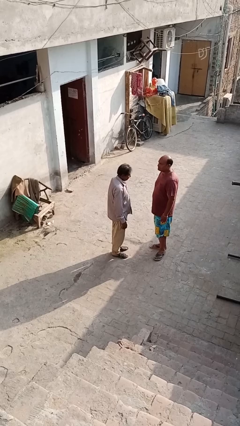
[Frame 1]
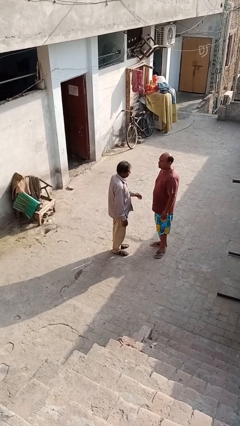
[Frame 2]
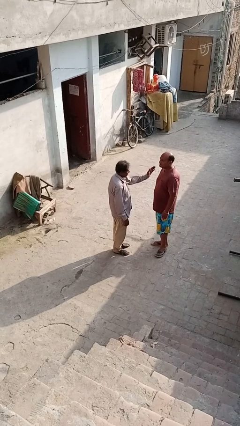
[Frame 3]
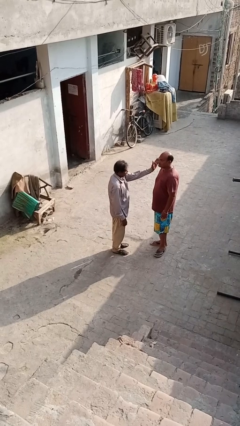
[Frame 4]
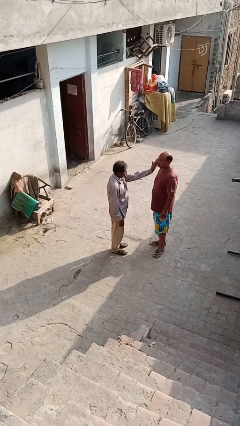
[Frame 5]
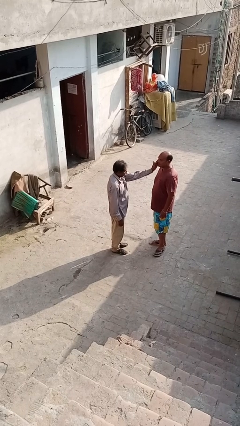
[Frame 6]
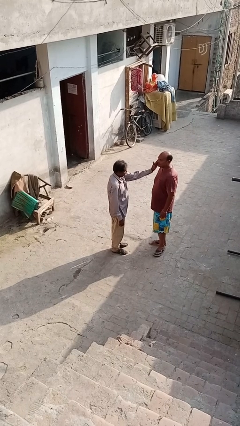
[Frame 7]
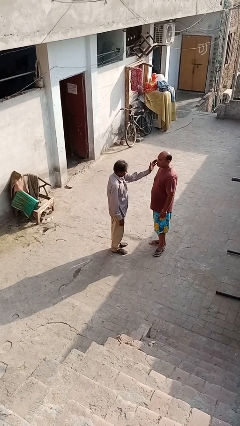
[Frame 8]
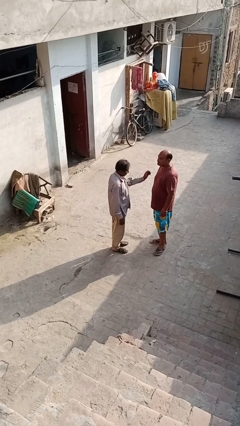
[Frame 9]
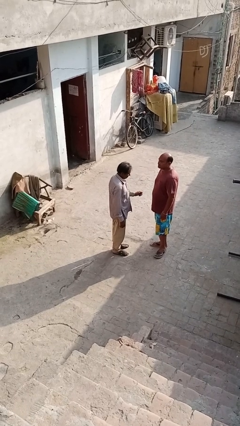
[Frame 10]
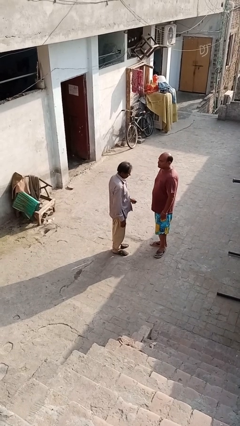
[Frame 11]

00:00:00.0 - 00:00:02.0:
person touches face of person

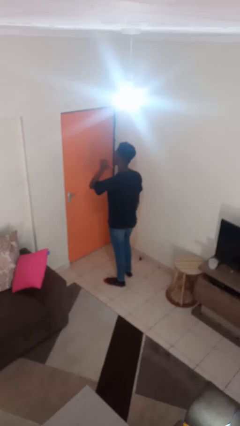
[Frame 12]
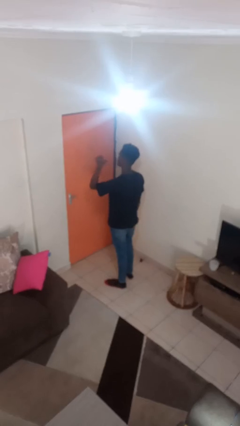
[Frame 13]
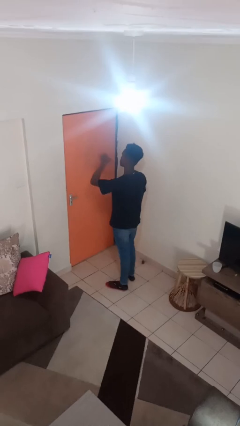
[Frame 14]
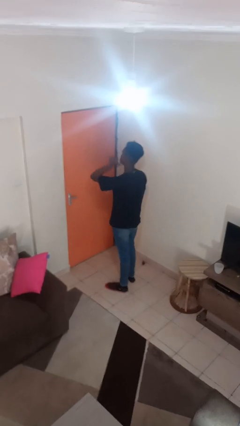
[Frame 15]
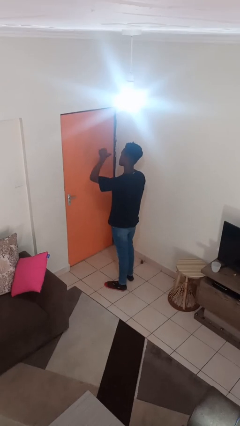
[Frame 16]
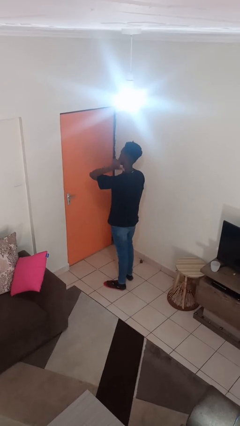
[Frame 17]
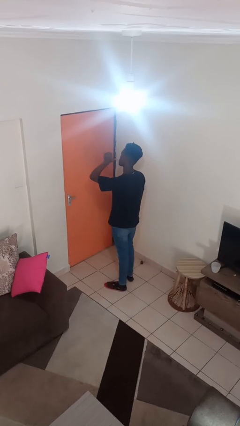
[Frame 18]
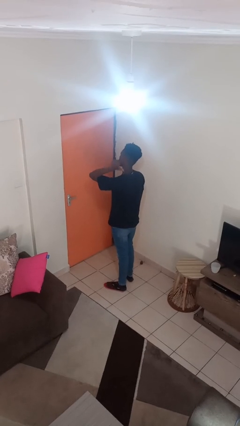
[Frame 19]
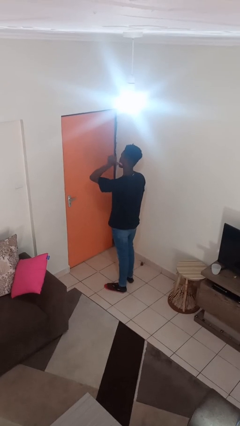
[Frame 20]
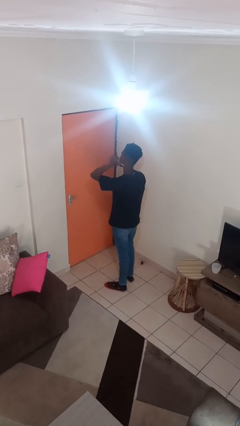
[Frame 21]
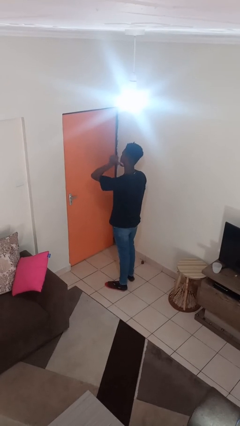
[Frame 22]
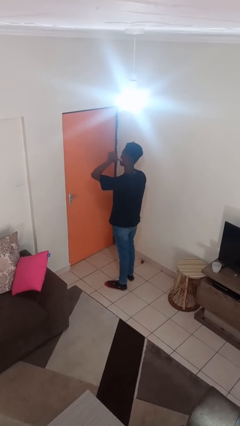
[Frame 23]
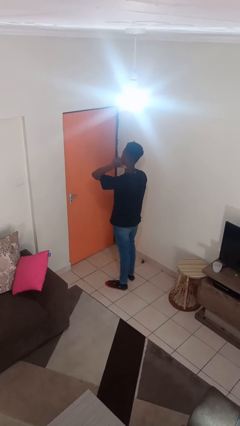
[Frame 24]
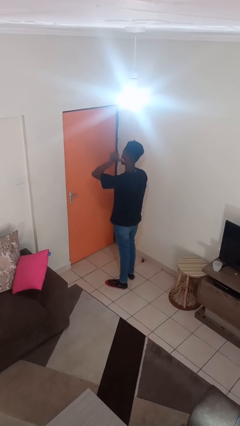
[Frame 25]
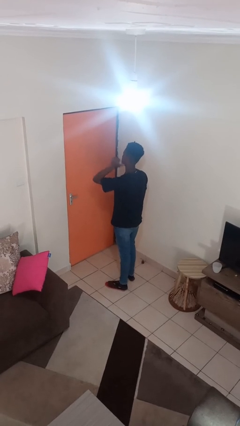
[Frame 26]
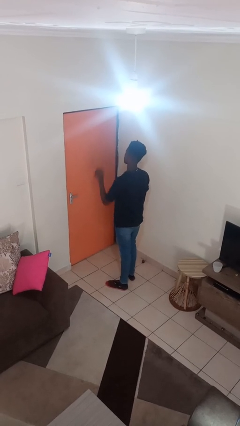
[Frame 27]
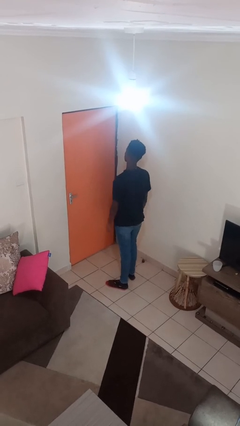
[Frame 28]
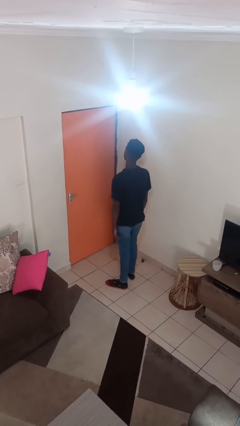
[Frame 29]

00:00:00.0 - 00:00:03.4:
person gestures behind me

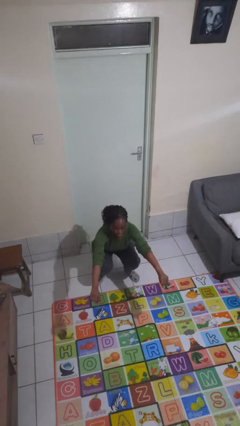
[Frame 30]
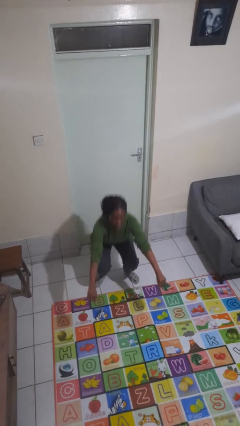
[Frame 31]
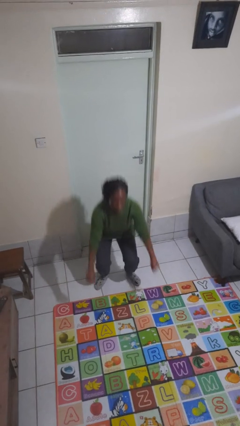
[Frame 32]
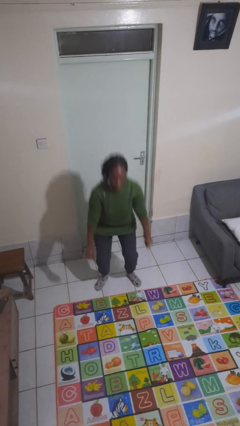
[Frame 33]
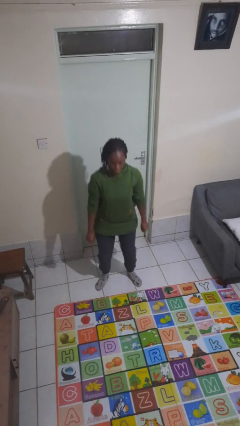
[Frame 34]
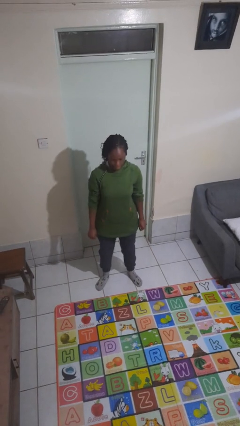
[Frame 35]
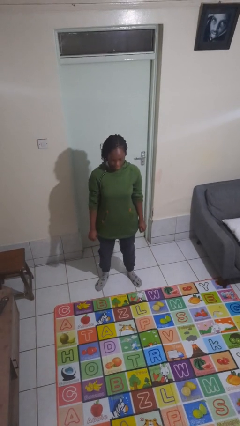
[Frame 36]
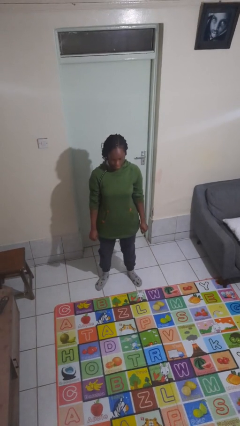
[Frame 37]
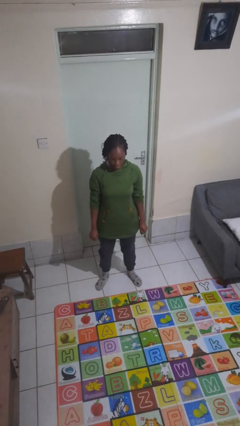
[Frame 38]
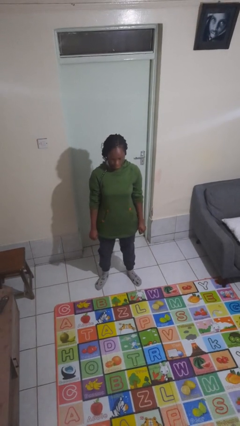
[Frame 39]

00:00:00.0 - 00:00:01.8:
person stands up

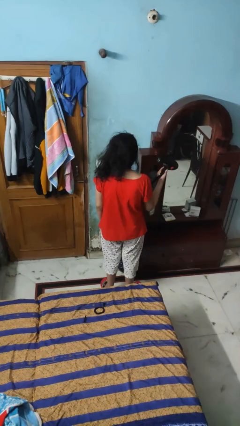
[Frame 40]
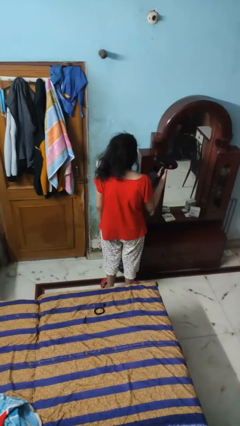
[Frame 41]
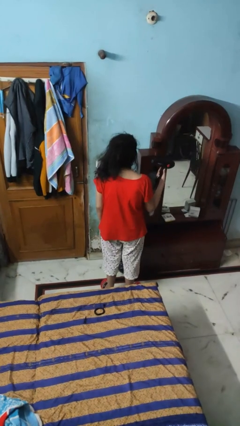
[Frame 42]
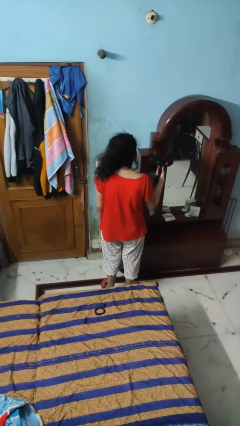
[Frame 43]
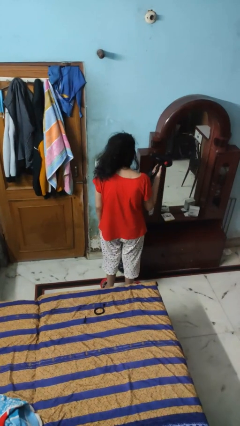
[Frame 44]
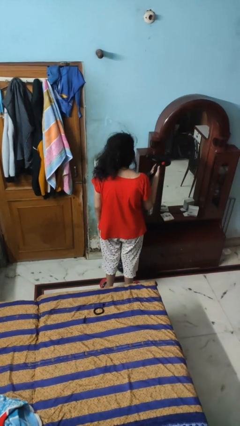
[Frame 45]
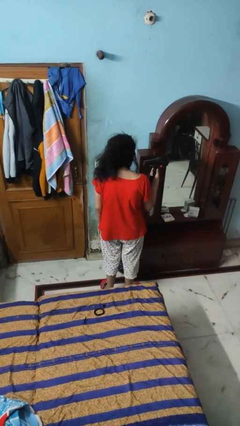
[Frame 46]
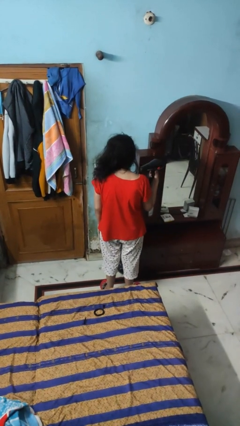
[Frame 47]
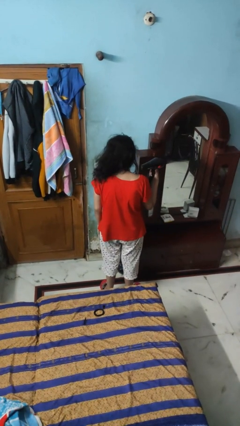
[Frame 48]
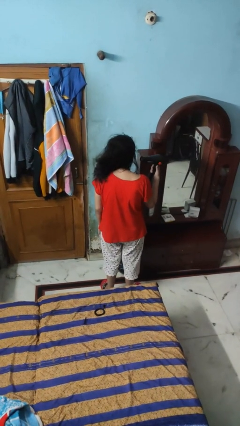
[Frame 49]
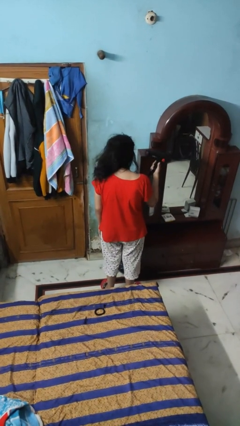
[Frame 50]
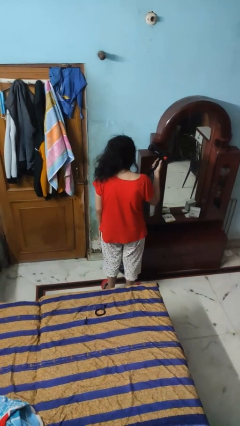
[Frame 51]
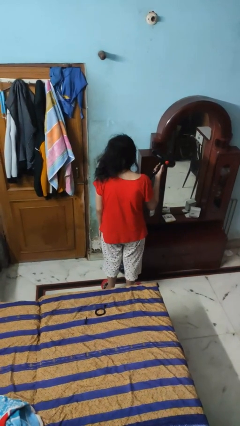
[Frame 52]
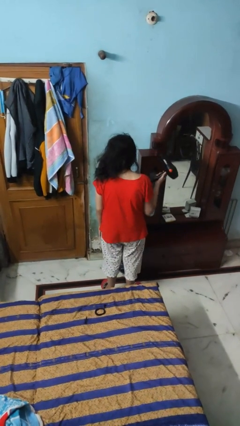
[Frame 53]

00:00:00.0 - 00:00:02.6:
person dries hair with hairdryer

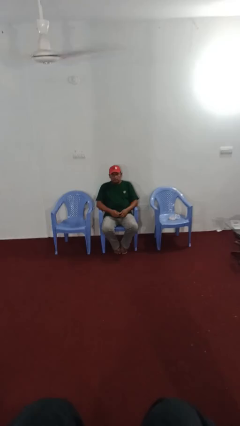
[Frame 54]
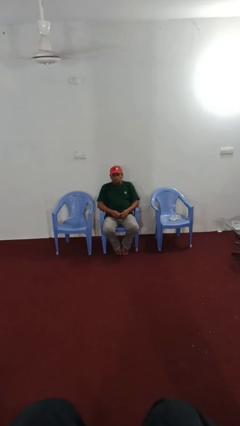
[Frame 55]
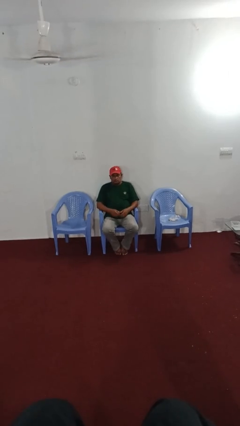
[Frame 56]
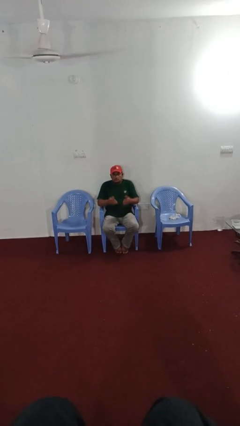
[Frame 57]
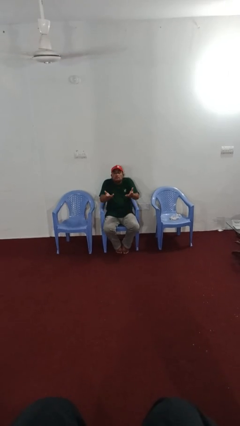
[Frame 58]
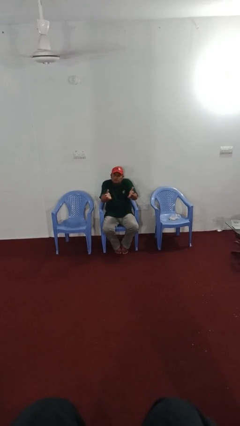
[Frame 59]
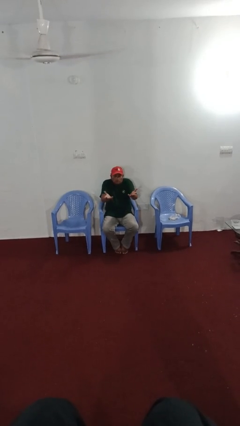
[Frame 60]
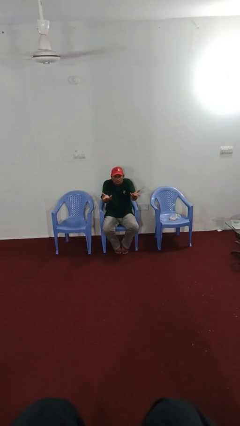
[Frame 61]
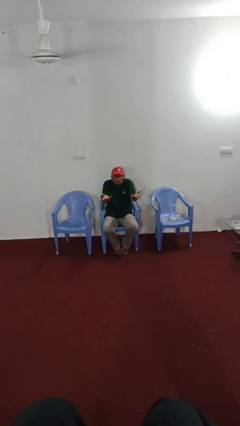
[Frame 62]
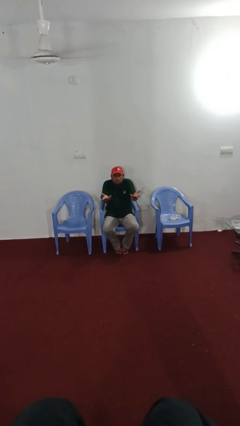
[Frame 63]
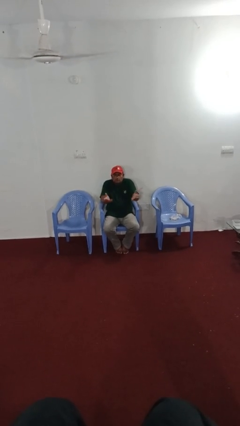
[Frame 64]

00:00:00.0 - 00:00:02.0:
person shrugs

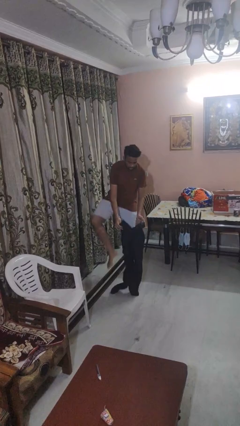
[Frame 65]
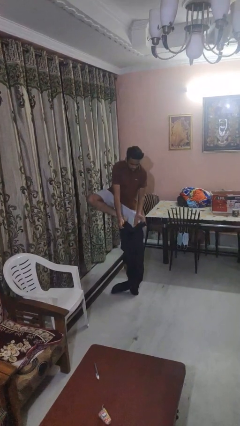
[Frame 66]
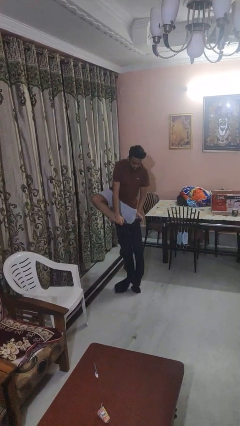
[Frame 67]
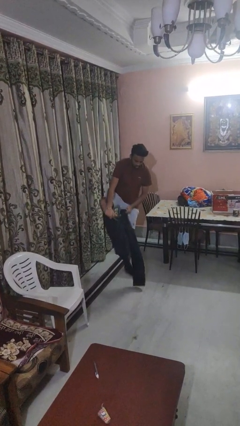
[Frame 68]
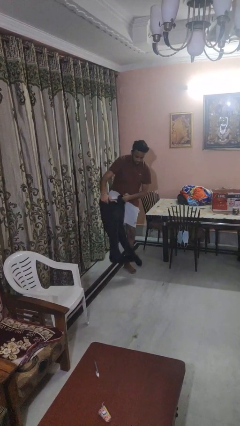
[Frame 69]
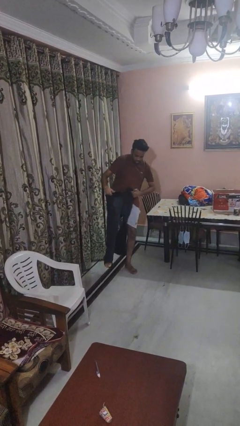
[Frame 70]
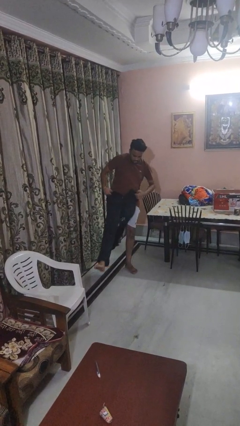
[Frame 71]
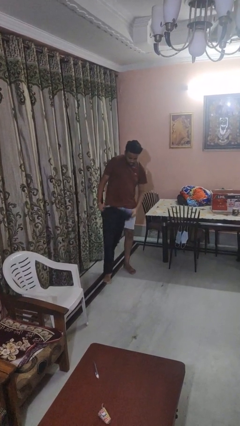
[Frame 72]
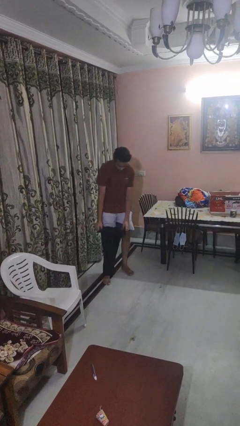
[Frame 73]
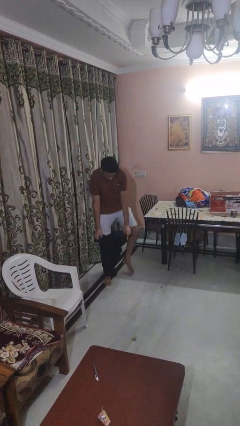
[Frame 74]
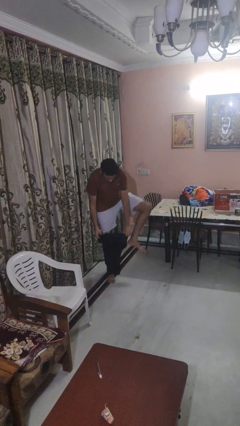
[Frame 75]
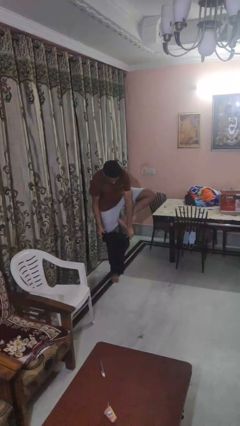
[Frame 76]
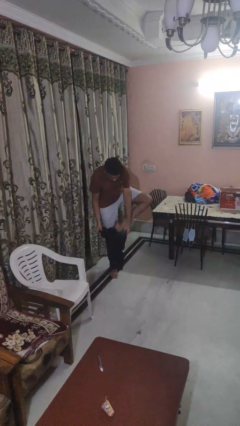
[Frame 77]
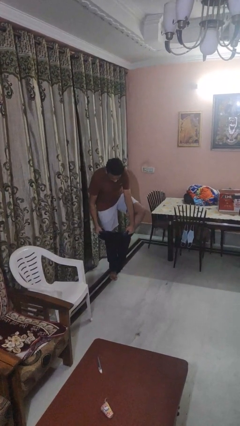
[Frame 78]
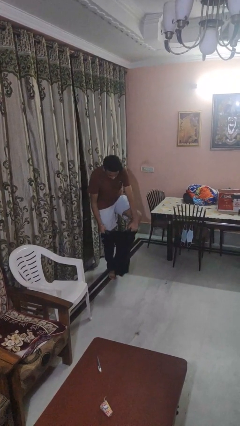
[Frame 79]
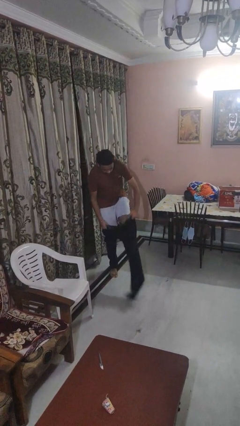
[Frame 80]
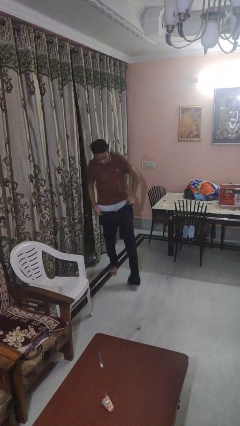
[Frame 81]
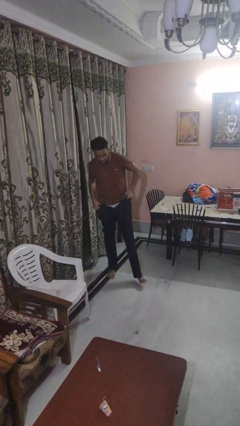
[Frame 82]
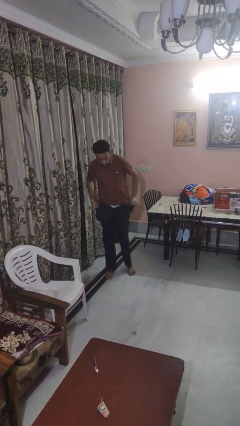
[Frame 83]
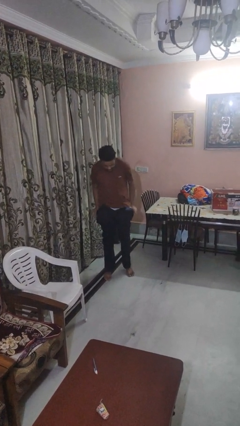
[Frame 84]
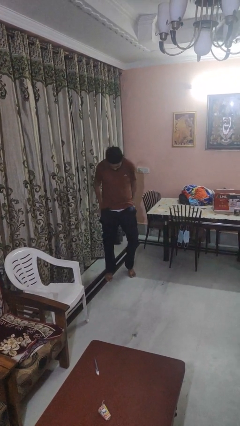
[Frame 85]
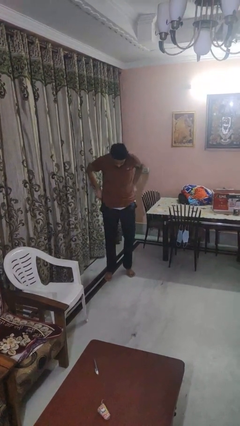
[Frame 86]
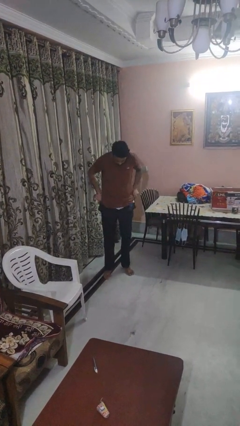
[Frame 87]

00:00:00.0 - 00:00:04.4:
person puts on pants

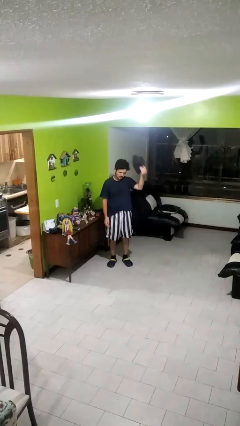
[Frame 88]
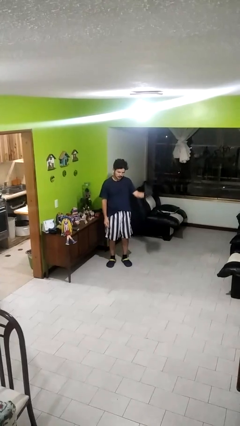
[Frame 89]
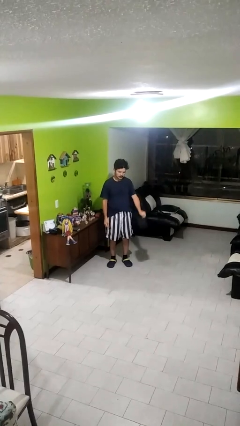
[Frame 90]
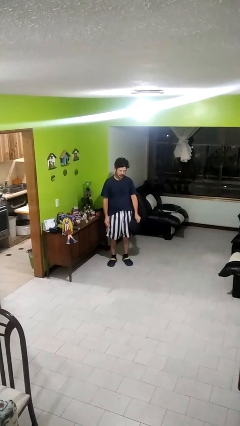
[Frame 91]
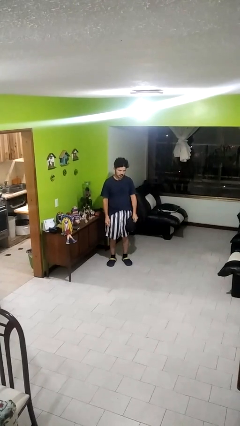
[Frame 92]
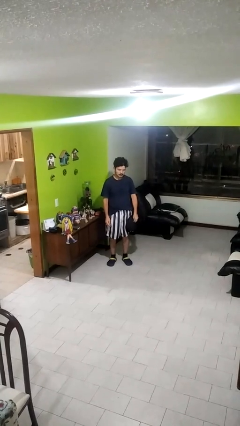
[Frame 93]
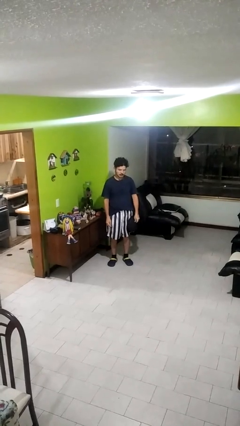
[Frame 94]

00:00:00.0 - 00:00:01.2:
person takes off hat
